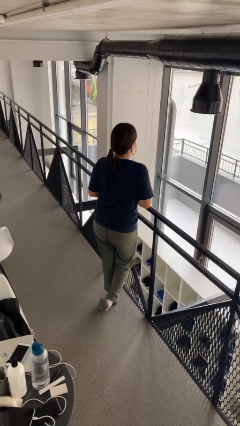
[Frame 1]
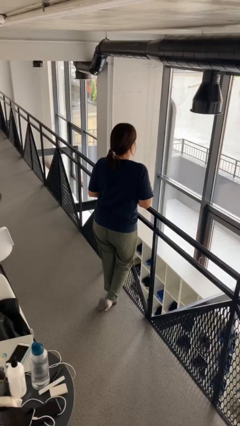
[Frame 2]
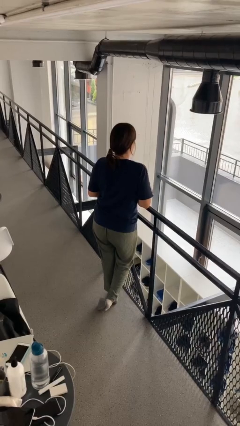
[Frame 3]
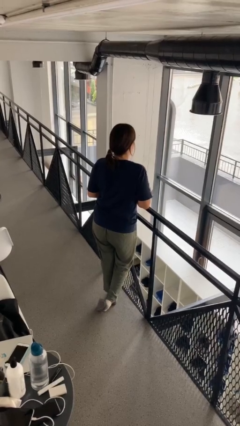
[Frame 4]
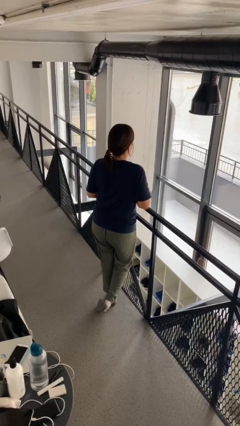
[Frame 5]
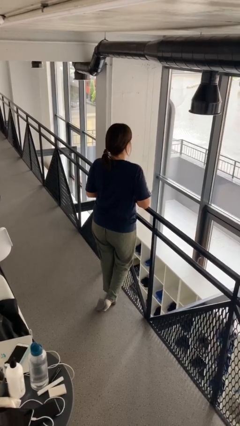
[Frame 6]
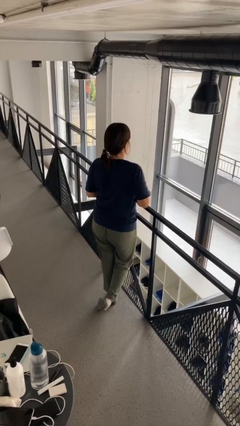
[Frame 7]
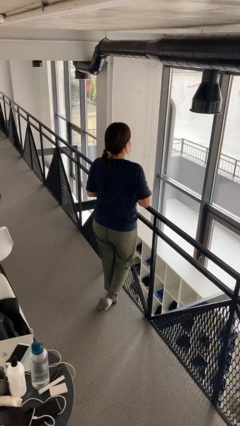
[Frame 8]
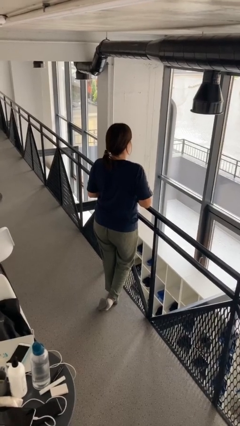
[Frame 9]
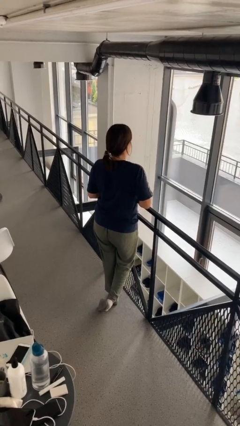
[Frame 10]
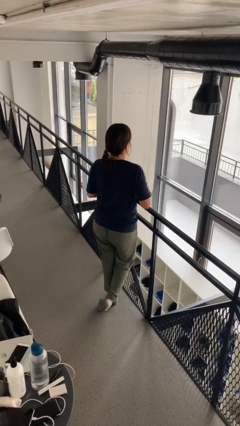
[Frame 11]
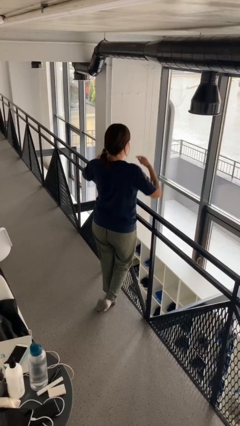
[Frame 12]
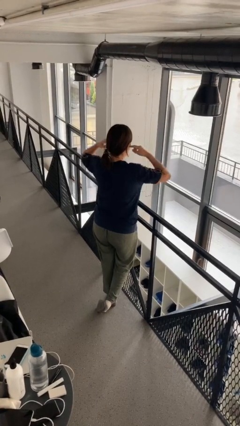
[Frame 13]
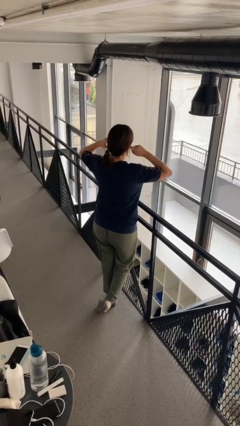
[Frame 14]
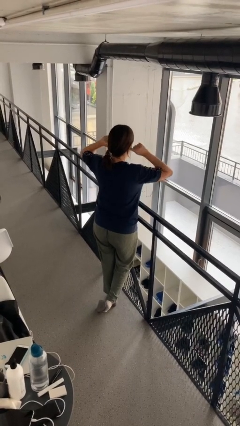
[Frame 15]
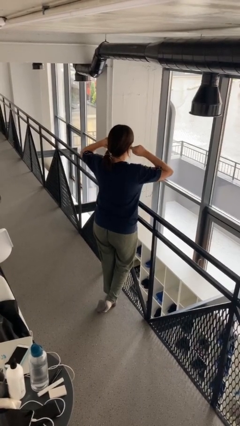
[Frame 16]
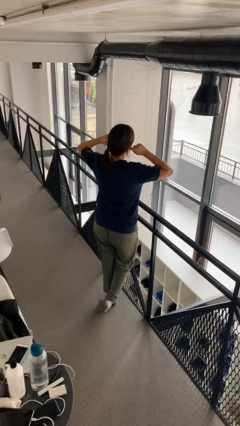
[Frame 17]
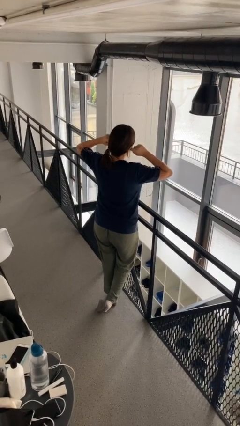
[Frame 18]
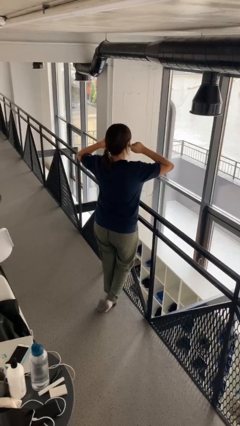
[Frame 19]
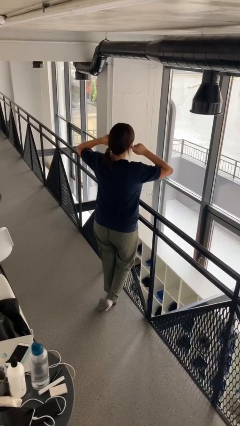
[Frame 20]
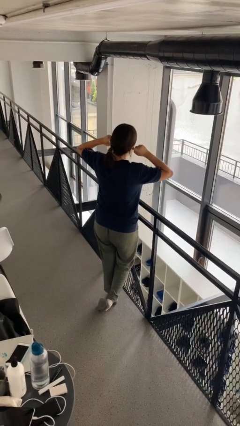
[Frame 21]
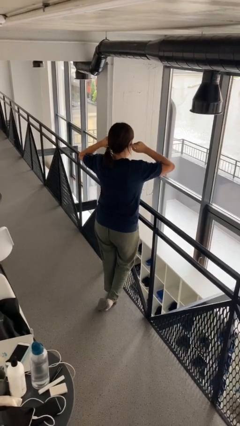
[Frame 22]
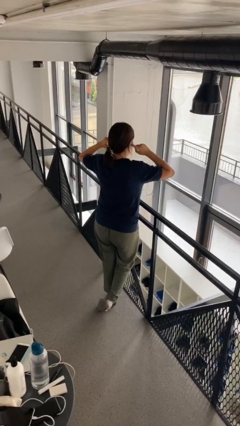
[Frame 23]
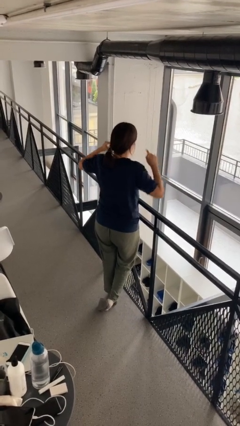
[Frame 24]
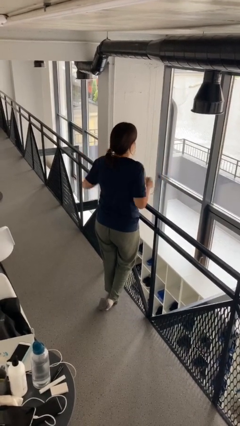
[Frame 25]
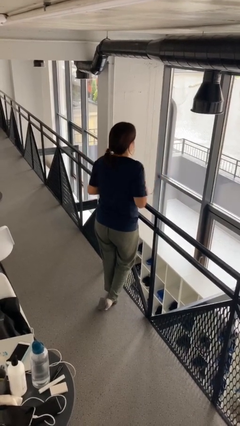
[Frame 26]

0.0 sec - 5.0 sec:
person puts fingers in ear

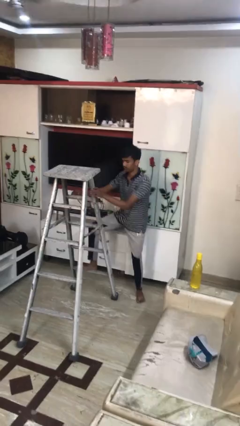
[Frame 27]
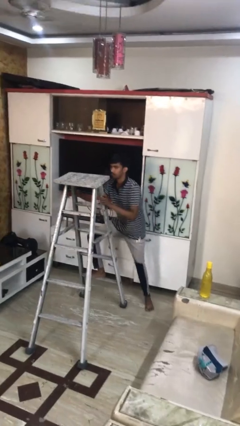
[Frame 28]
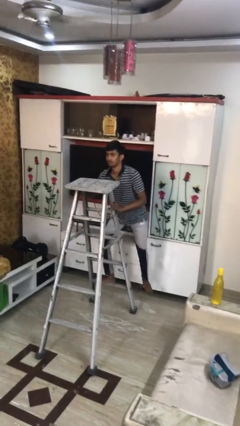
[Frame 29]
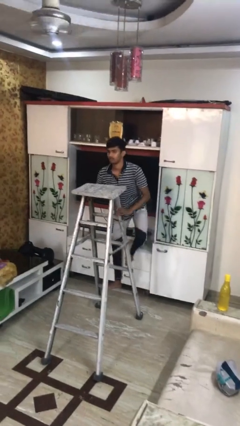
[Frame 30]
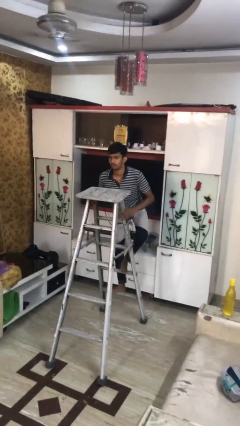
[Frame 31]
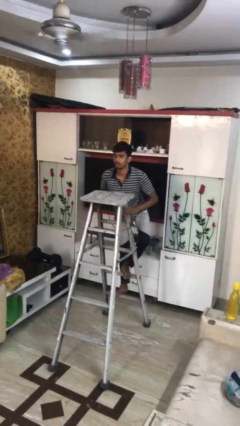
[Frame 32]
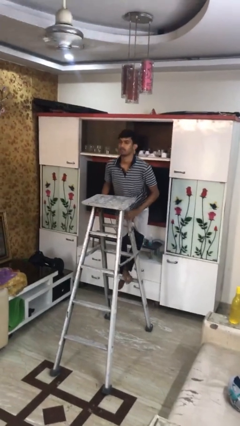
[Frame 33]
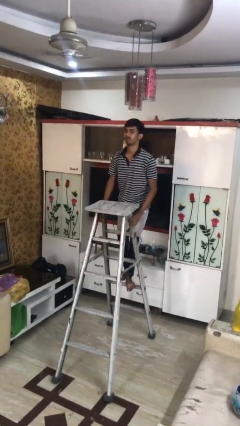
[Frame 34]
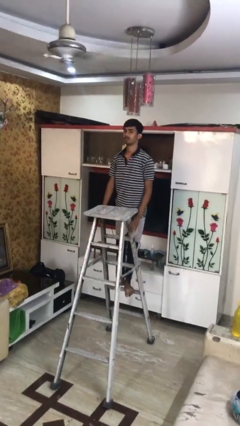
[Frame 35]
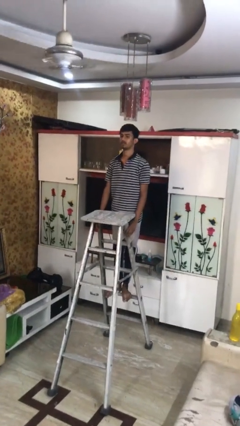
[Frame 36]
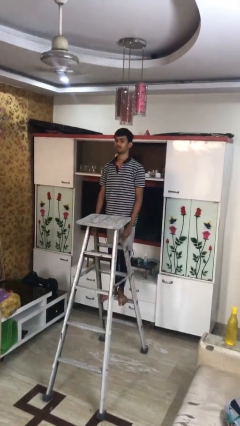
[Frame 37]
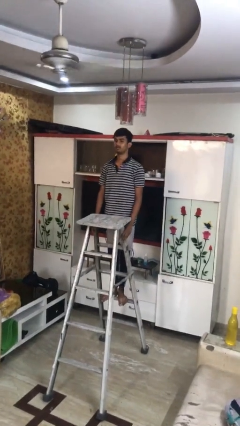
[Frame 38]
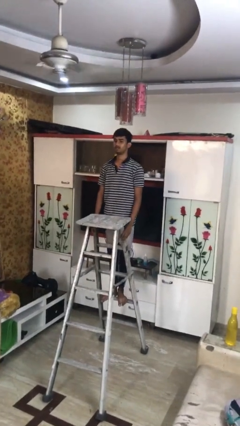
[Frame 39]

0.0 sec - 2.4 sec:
person climbs up ladder

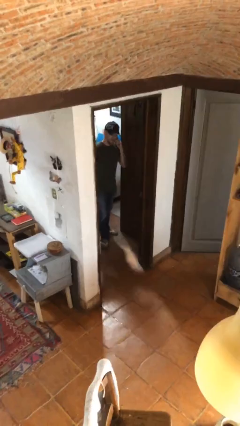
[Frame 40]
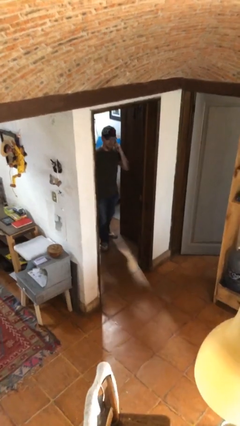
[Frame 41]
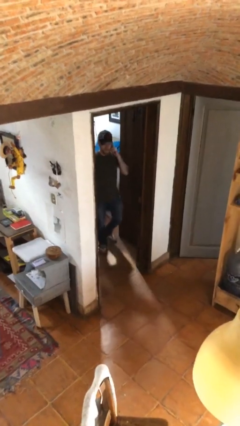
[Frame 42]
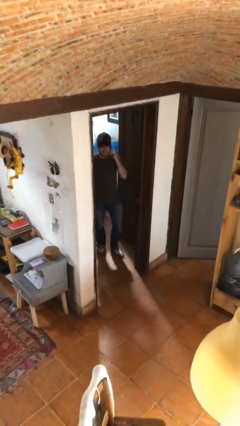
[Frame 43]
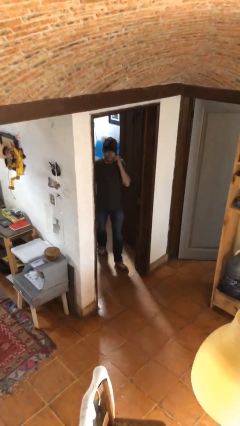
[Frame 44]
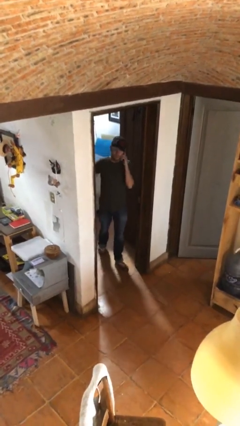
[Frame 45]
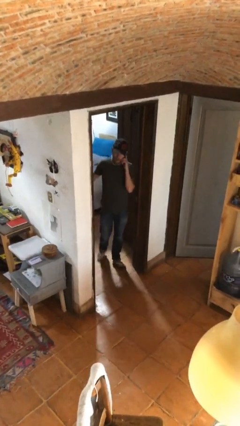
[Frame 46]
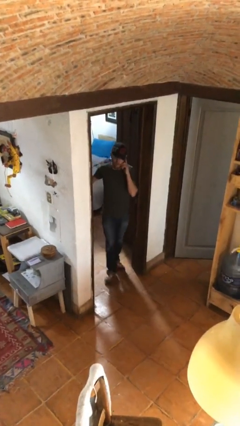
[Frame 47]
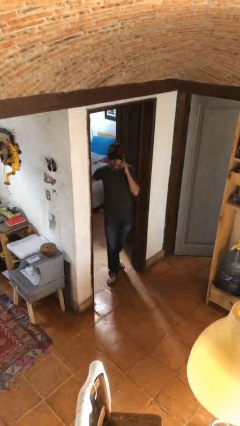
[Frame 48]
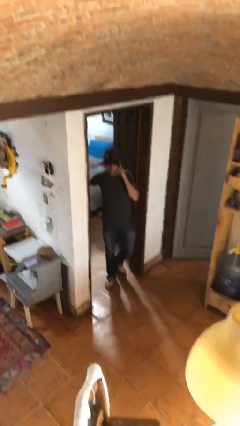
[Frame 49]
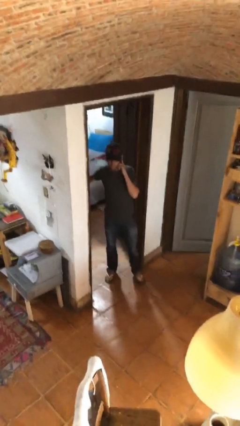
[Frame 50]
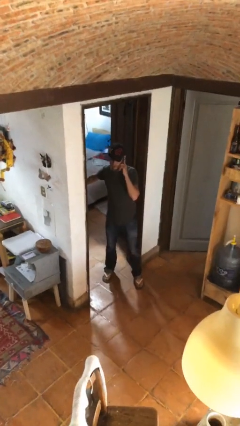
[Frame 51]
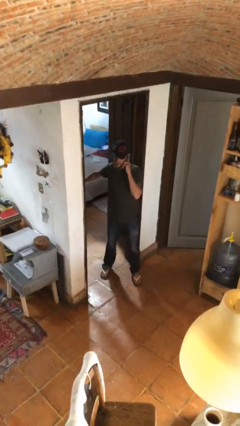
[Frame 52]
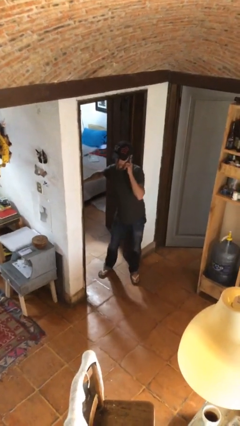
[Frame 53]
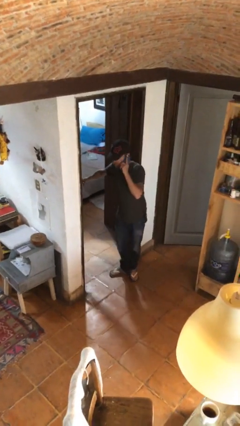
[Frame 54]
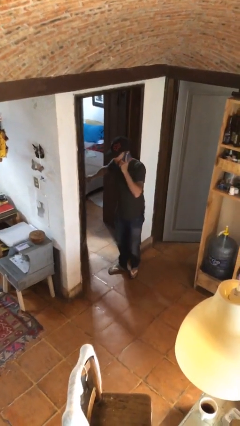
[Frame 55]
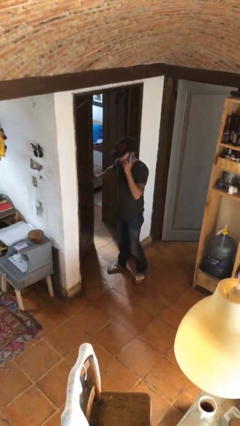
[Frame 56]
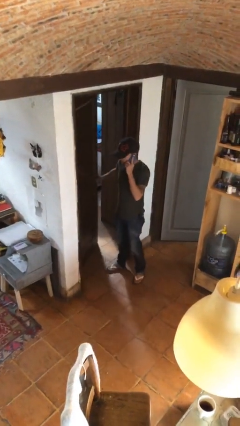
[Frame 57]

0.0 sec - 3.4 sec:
person enters scene through structure

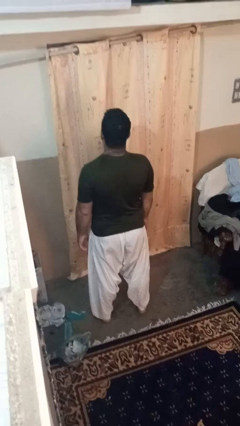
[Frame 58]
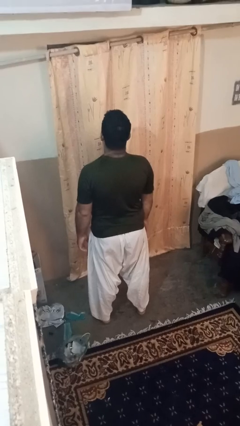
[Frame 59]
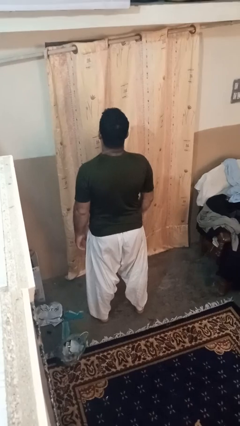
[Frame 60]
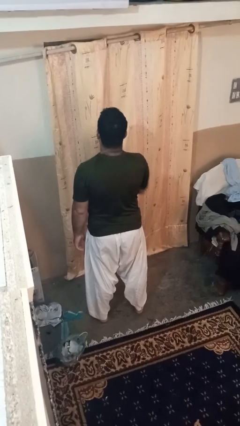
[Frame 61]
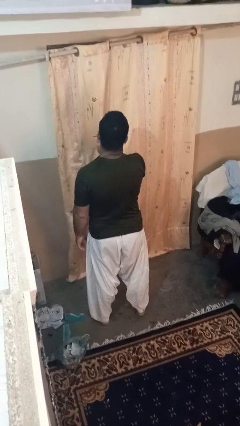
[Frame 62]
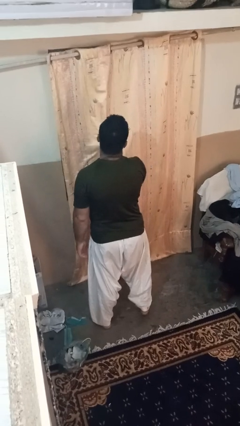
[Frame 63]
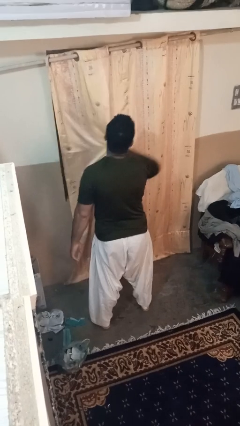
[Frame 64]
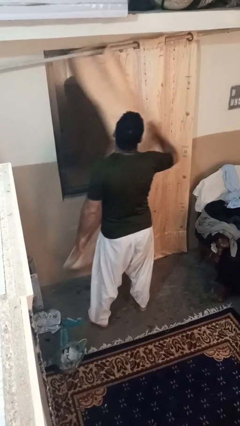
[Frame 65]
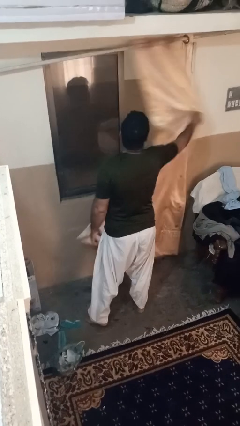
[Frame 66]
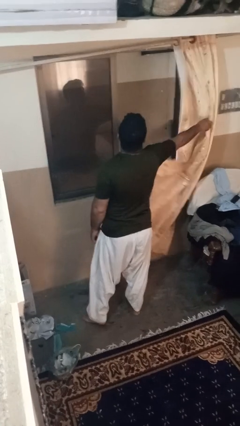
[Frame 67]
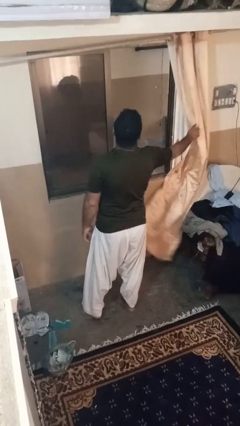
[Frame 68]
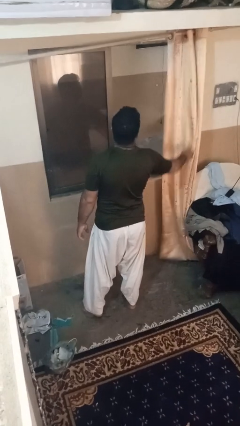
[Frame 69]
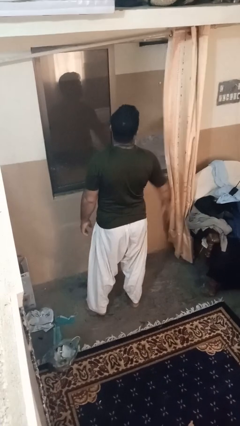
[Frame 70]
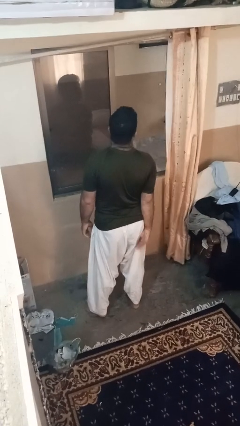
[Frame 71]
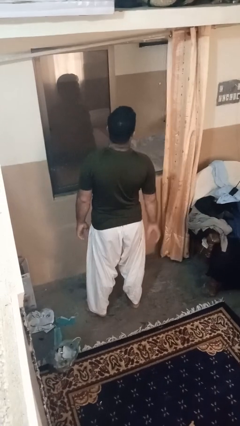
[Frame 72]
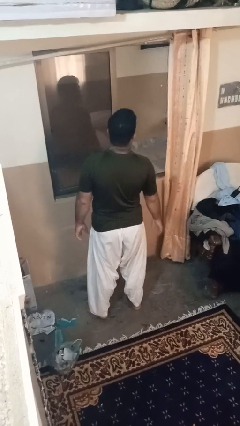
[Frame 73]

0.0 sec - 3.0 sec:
person opens curtains

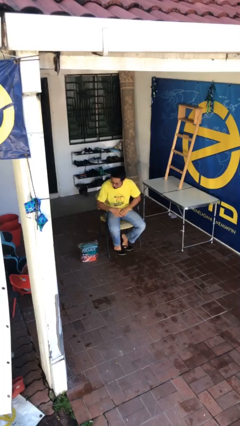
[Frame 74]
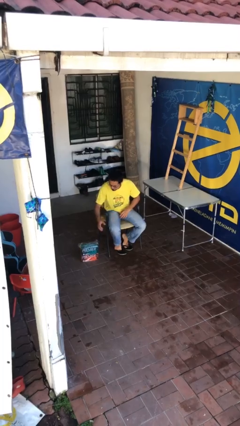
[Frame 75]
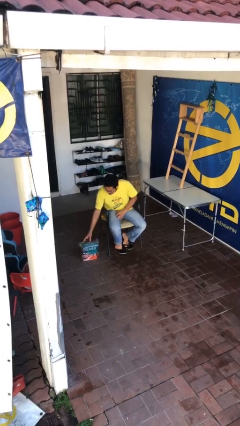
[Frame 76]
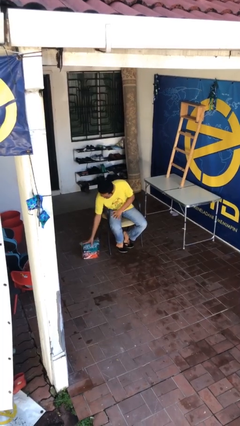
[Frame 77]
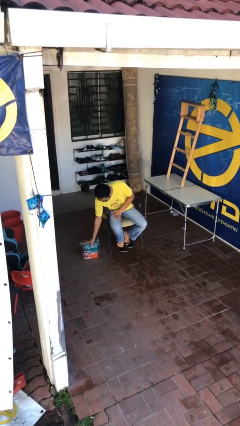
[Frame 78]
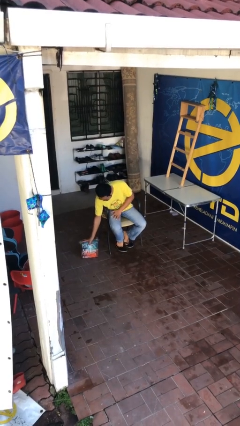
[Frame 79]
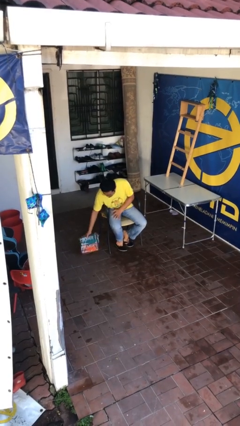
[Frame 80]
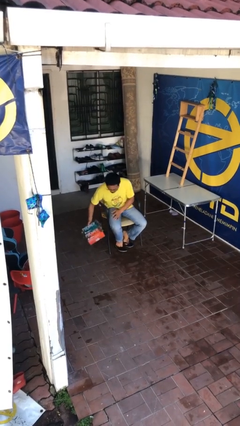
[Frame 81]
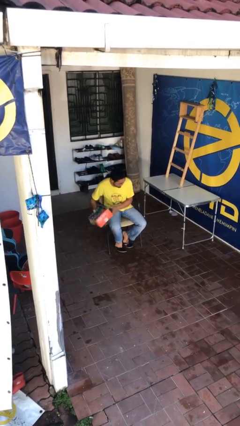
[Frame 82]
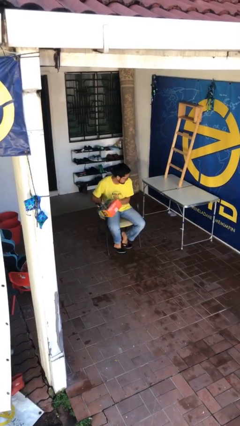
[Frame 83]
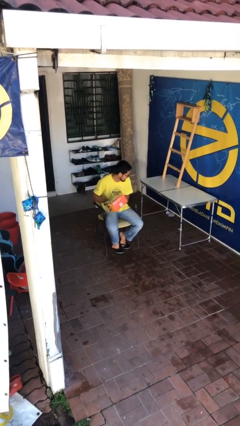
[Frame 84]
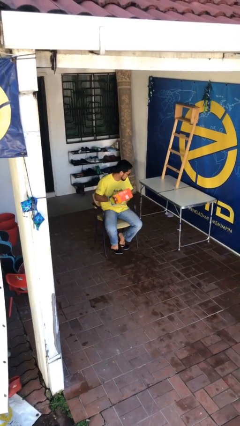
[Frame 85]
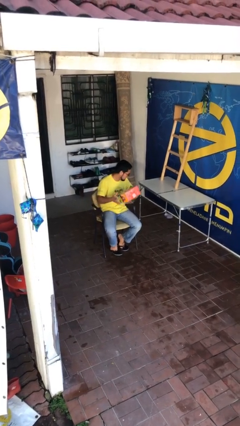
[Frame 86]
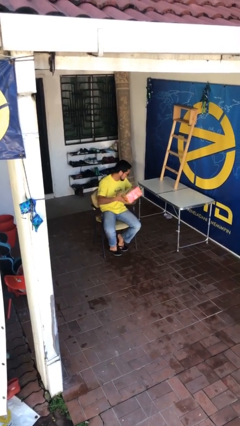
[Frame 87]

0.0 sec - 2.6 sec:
person picks up object from floor

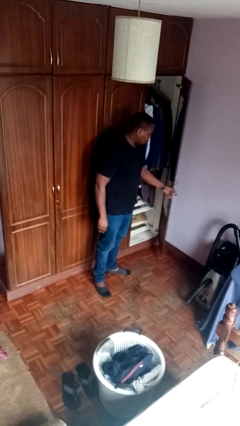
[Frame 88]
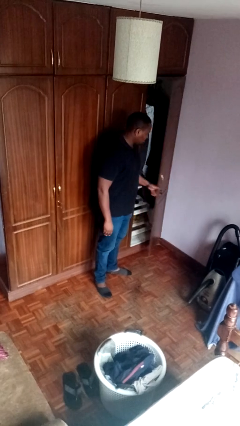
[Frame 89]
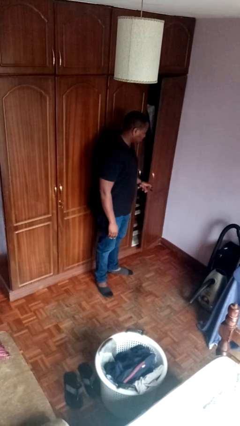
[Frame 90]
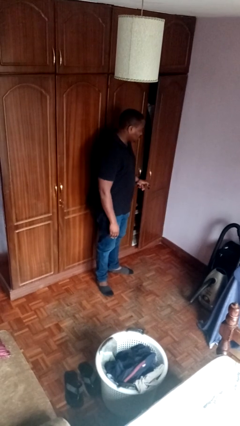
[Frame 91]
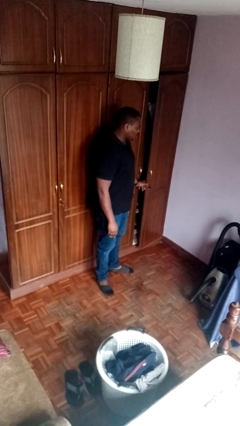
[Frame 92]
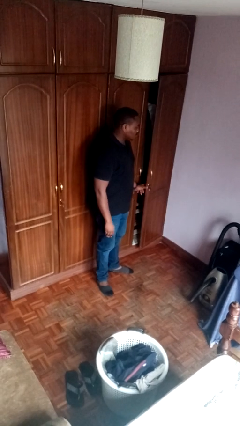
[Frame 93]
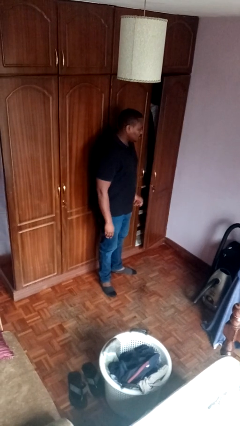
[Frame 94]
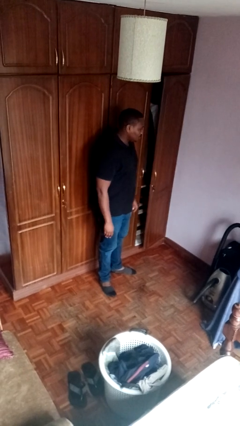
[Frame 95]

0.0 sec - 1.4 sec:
person closes closet door
